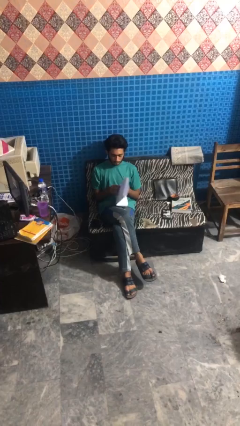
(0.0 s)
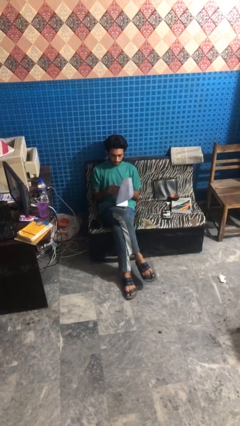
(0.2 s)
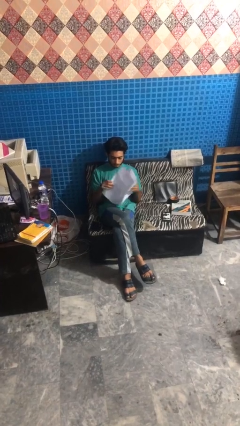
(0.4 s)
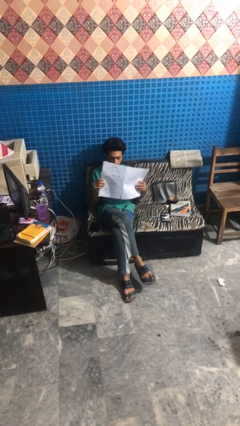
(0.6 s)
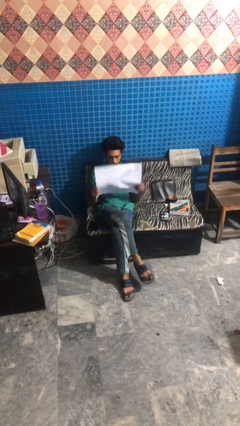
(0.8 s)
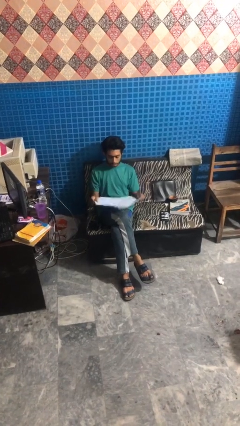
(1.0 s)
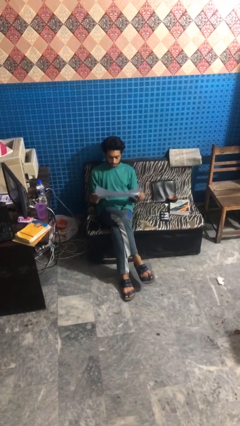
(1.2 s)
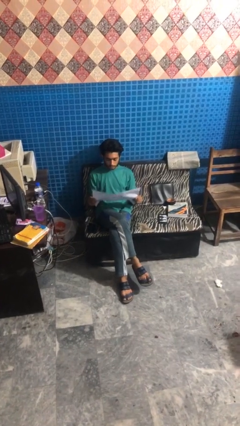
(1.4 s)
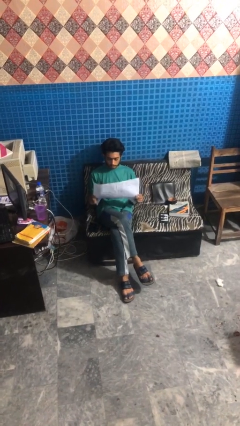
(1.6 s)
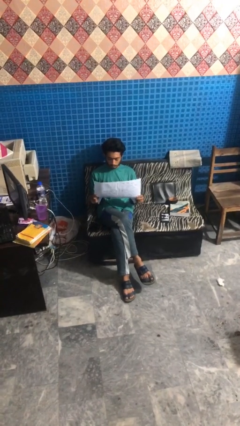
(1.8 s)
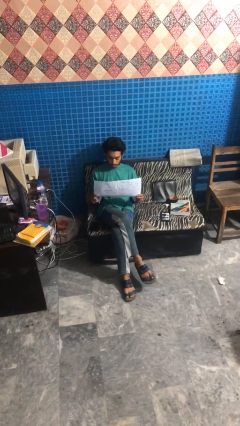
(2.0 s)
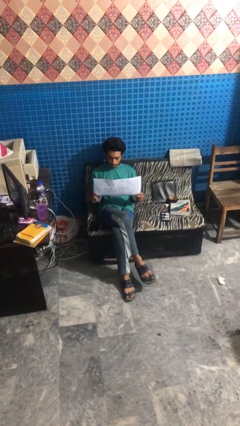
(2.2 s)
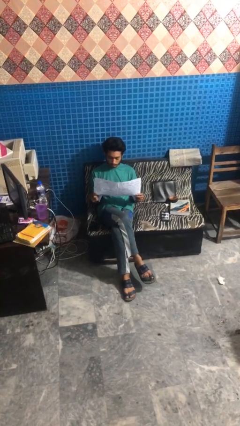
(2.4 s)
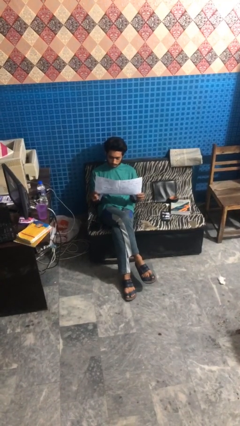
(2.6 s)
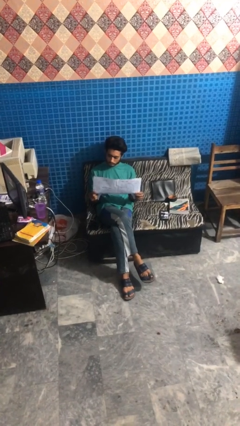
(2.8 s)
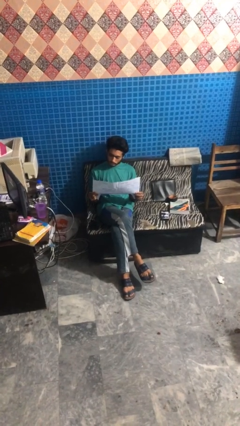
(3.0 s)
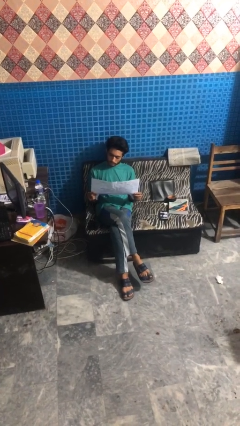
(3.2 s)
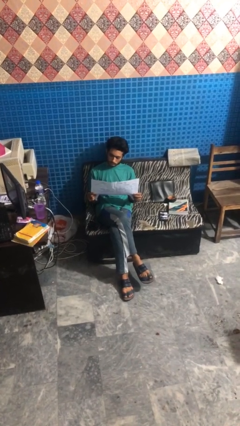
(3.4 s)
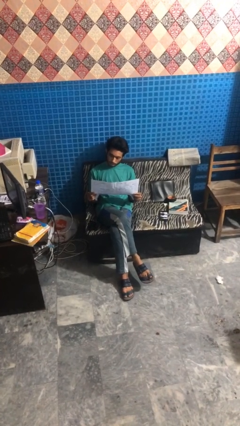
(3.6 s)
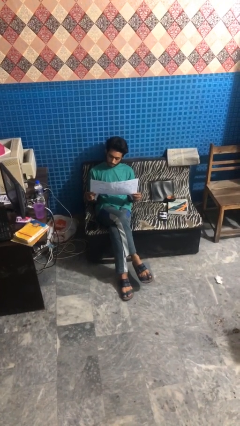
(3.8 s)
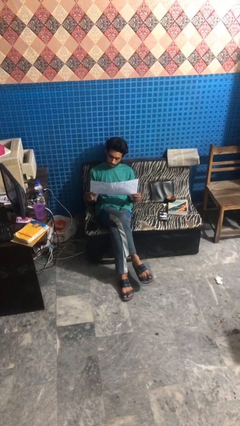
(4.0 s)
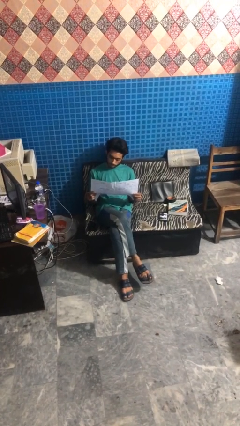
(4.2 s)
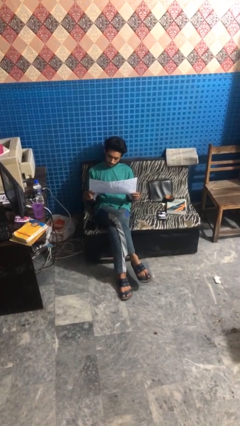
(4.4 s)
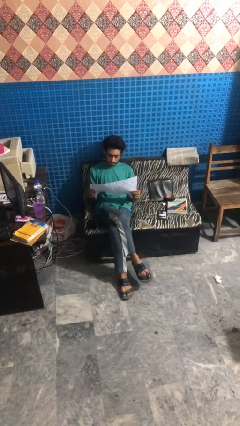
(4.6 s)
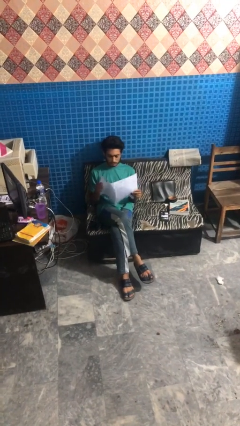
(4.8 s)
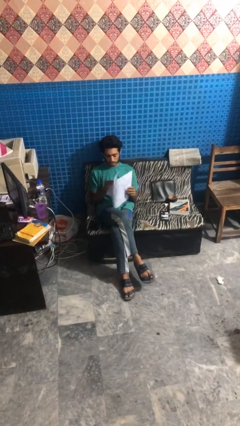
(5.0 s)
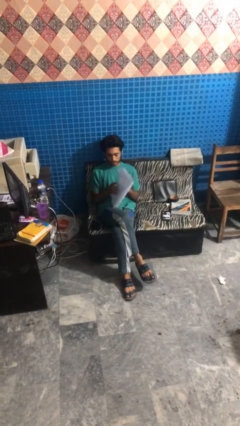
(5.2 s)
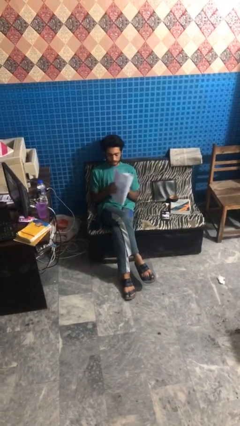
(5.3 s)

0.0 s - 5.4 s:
person reads newspaper

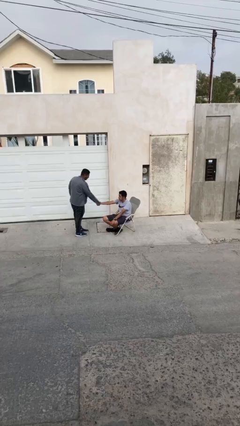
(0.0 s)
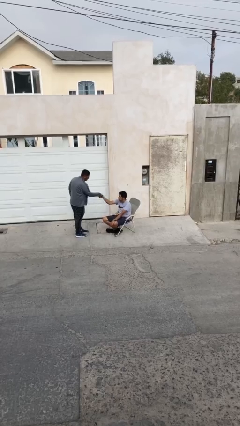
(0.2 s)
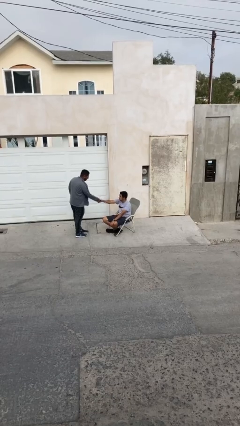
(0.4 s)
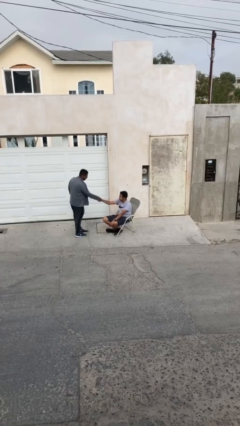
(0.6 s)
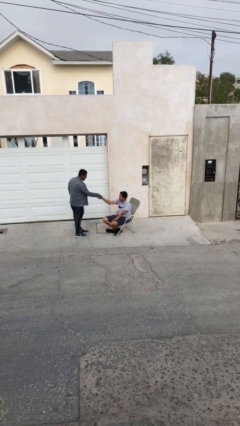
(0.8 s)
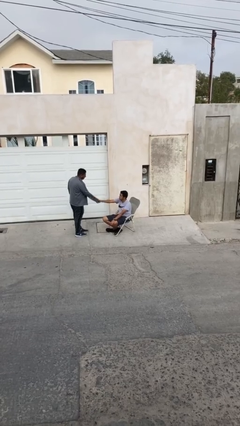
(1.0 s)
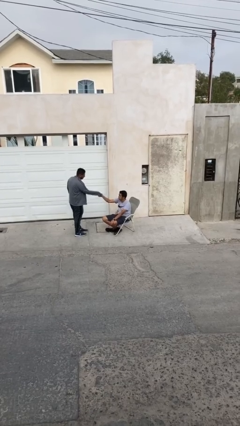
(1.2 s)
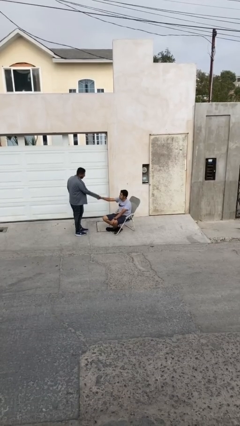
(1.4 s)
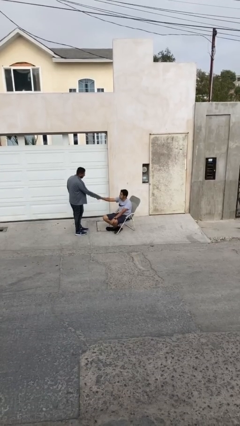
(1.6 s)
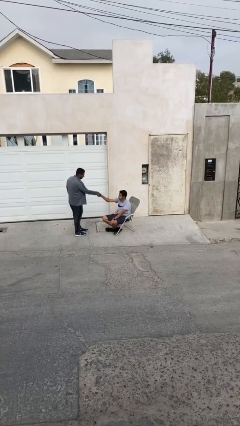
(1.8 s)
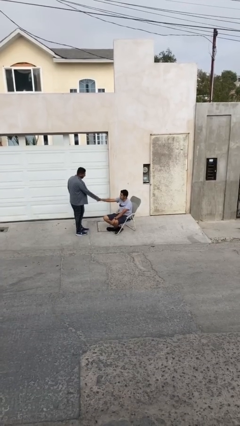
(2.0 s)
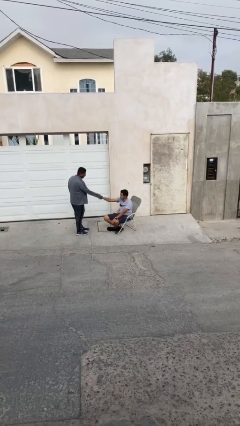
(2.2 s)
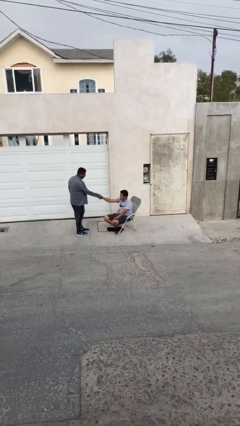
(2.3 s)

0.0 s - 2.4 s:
person shakes hand

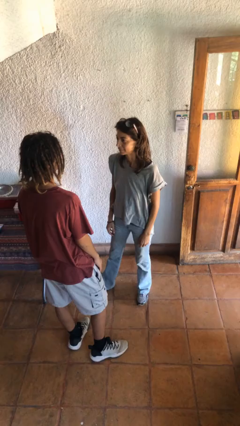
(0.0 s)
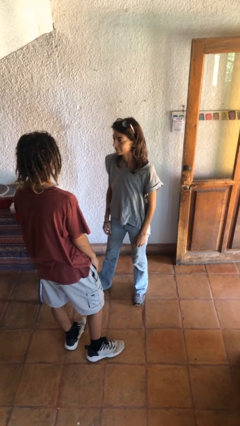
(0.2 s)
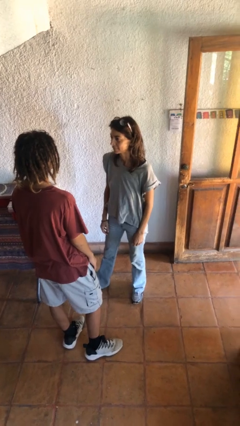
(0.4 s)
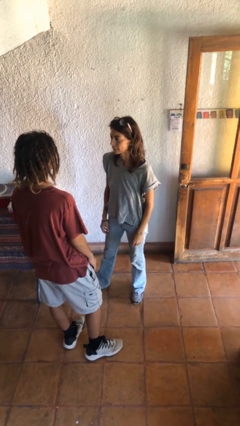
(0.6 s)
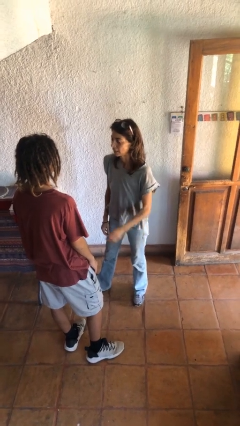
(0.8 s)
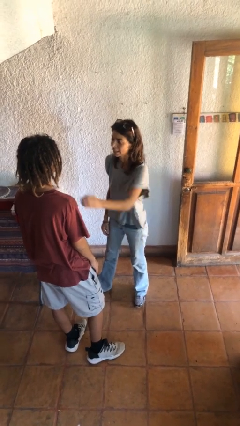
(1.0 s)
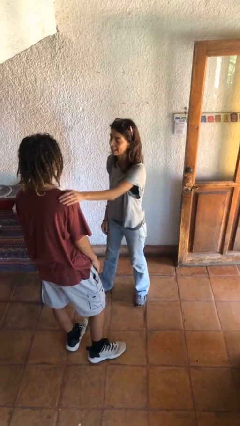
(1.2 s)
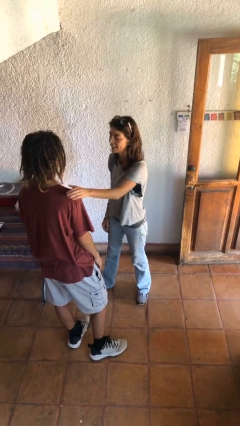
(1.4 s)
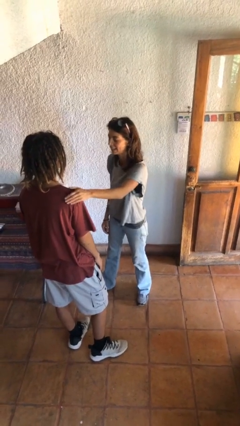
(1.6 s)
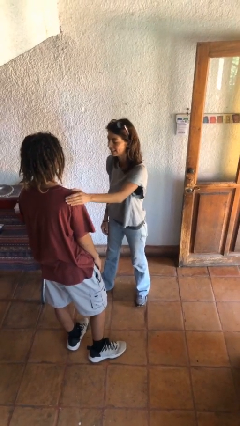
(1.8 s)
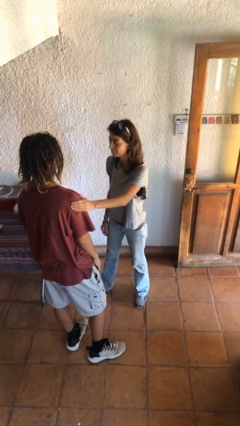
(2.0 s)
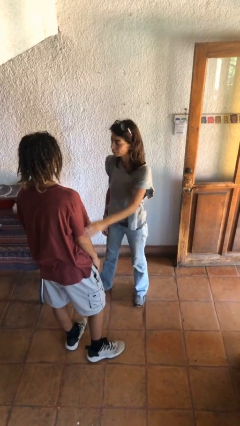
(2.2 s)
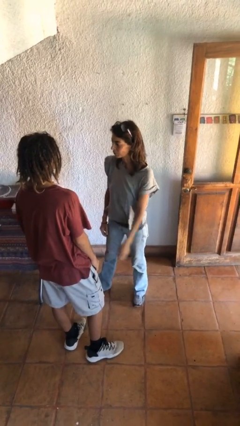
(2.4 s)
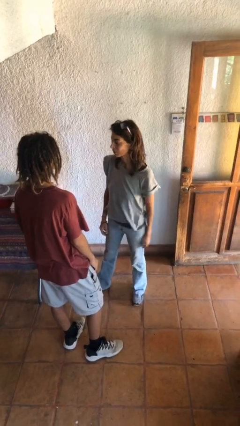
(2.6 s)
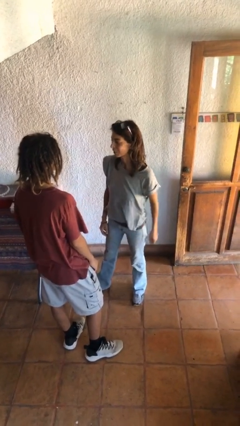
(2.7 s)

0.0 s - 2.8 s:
person pounds shoulders of person

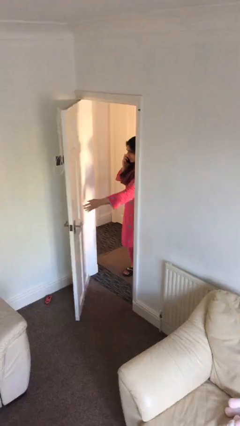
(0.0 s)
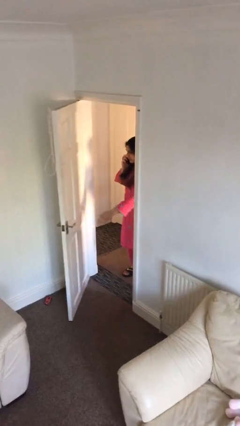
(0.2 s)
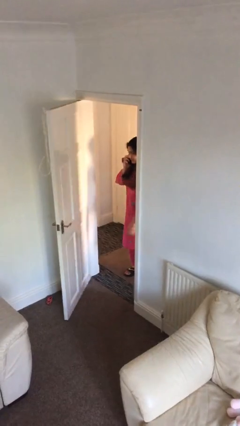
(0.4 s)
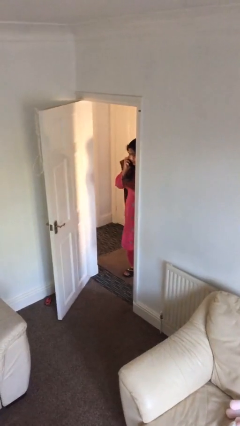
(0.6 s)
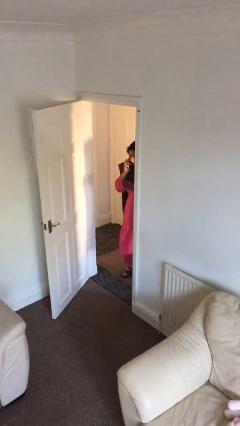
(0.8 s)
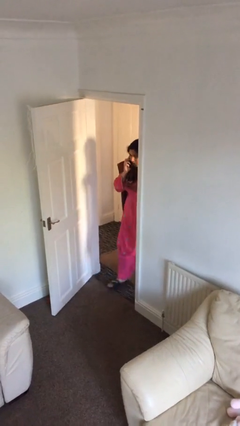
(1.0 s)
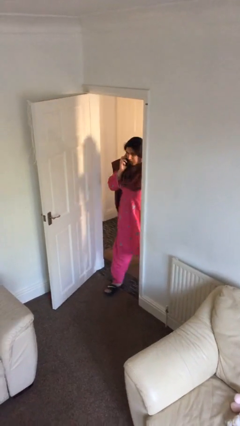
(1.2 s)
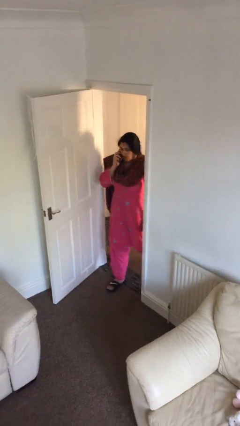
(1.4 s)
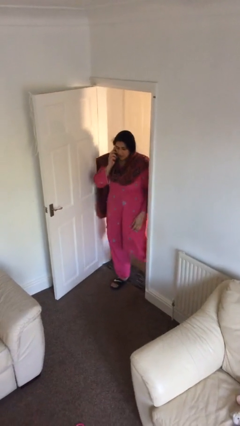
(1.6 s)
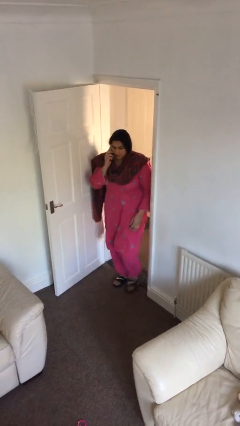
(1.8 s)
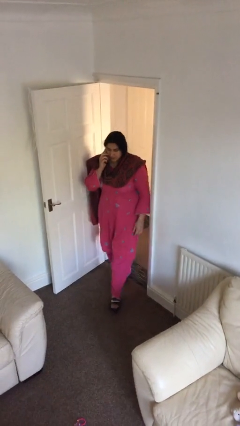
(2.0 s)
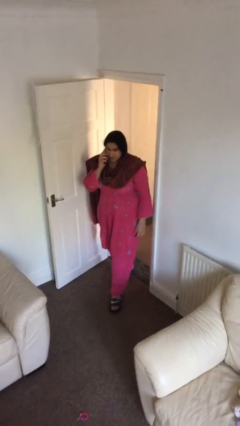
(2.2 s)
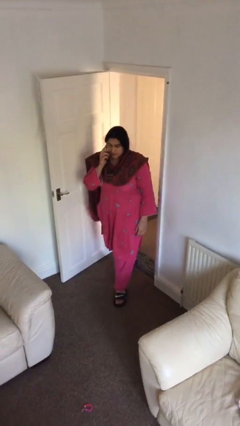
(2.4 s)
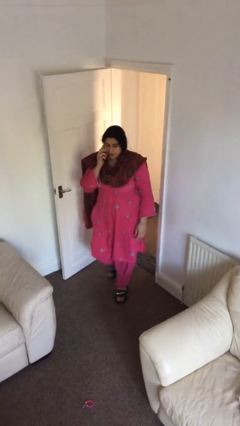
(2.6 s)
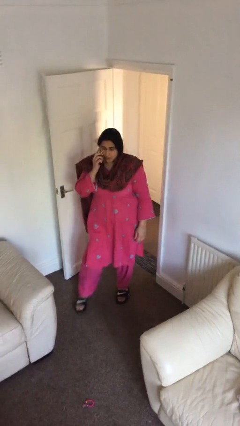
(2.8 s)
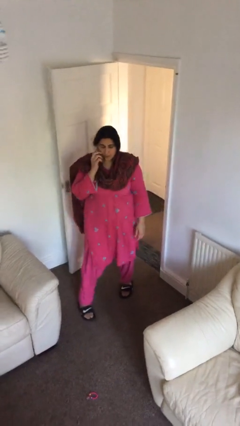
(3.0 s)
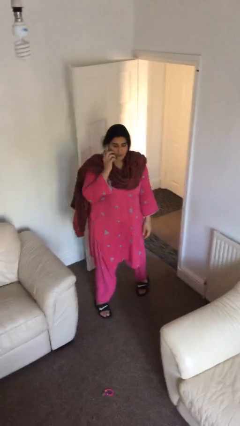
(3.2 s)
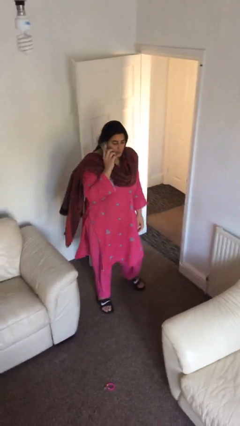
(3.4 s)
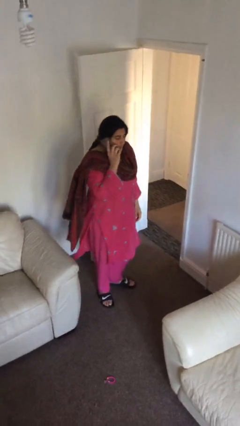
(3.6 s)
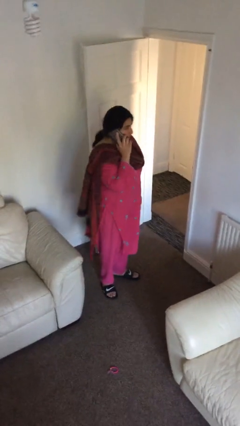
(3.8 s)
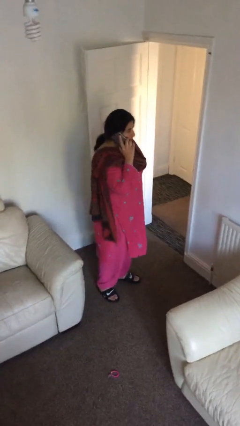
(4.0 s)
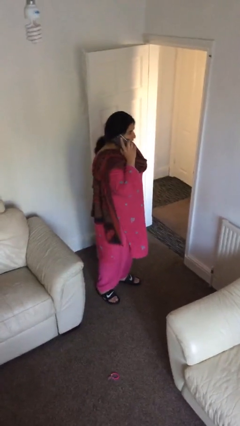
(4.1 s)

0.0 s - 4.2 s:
person enters scene through structure

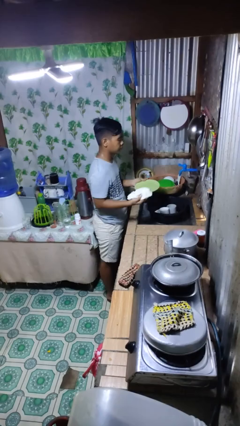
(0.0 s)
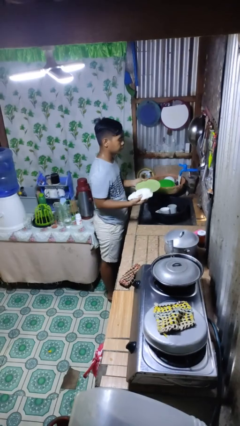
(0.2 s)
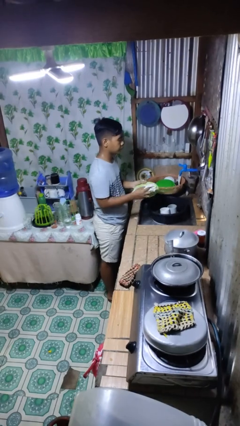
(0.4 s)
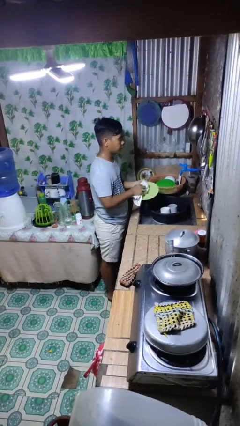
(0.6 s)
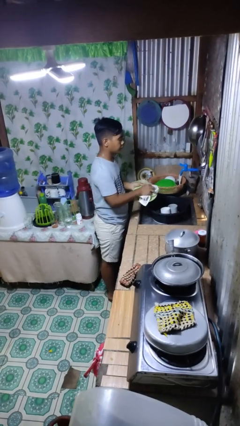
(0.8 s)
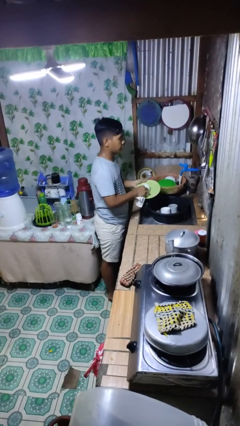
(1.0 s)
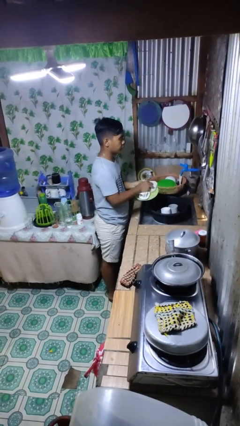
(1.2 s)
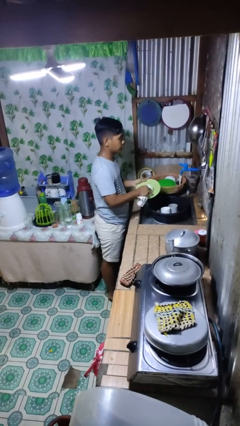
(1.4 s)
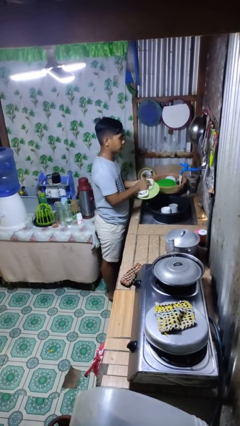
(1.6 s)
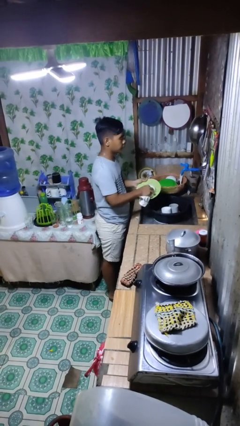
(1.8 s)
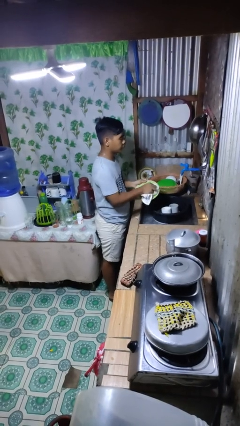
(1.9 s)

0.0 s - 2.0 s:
person dries dish

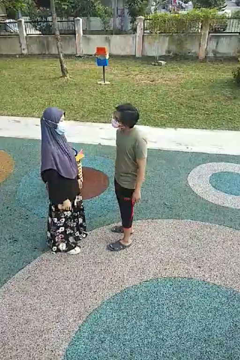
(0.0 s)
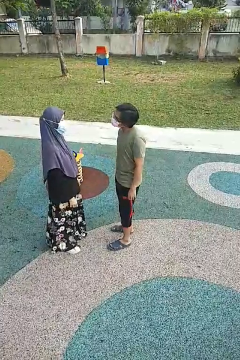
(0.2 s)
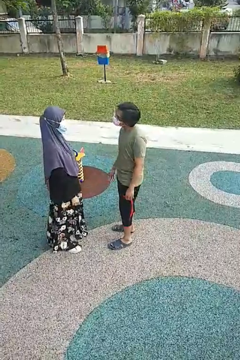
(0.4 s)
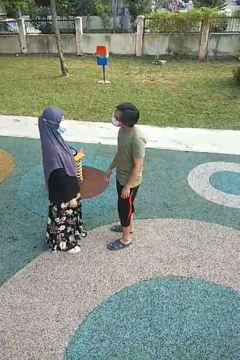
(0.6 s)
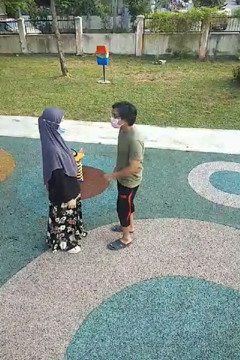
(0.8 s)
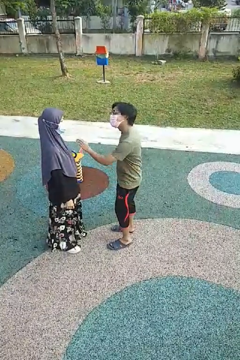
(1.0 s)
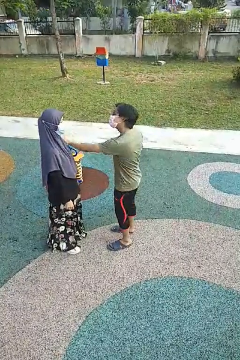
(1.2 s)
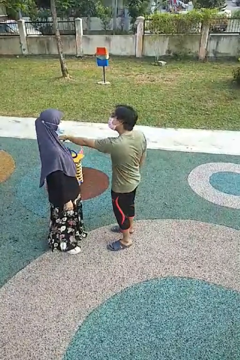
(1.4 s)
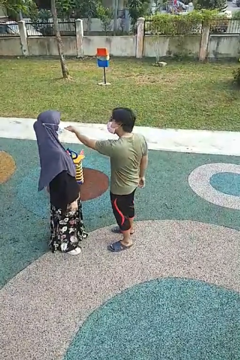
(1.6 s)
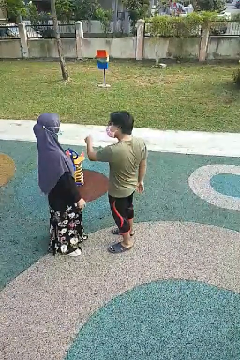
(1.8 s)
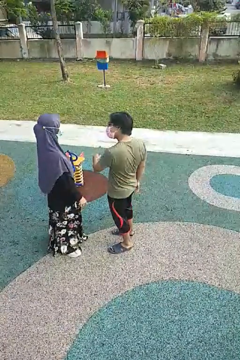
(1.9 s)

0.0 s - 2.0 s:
person shoves person
